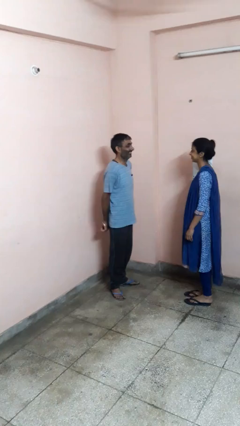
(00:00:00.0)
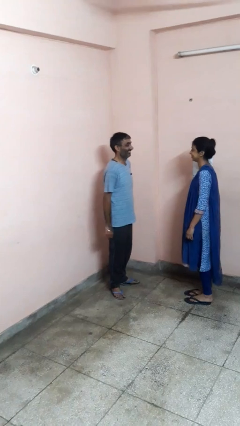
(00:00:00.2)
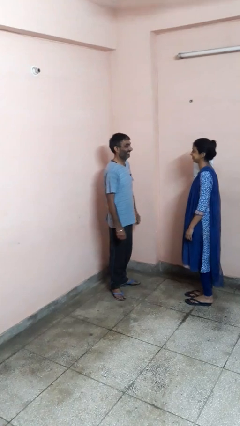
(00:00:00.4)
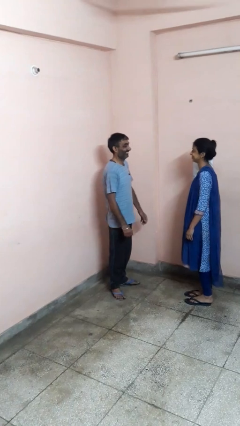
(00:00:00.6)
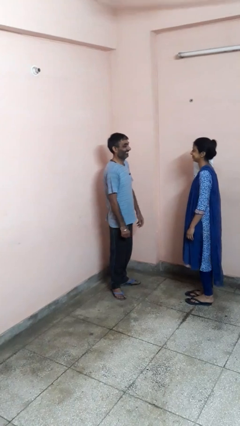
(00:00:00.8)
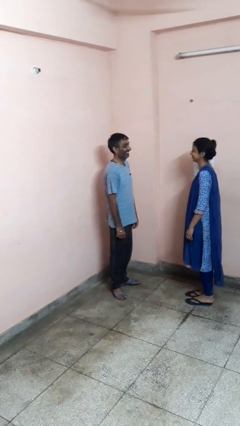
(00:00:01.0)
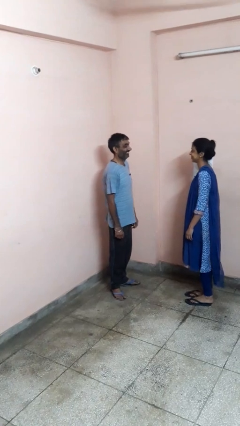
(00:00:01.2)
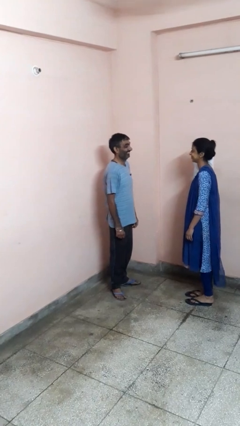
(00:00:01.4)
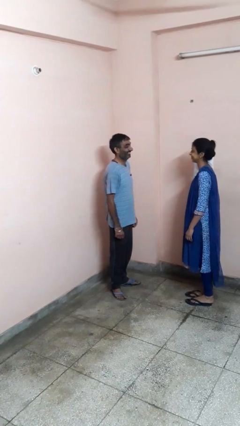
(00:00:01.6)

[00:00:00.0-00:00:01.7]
person laughs with person

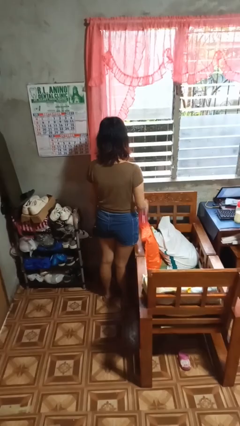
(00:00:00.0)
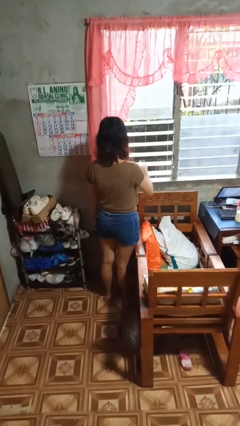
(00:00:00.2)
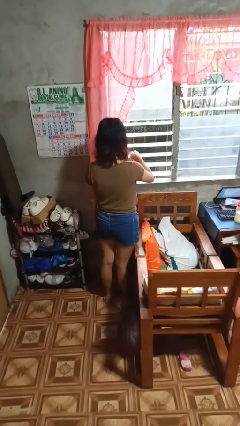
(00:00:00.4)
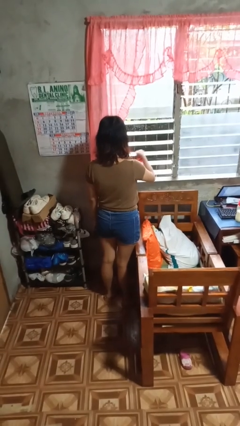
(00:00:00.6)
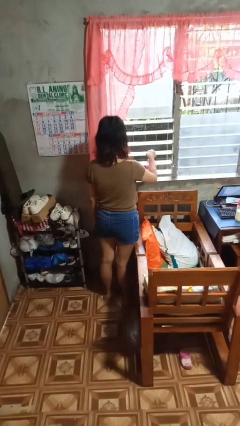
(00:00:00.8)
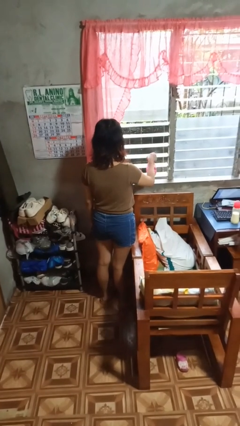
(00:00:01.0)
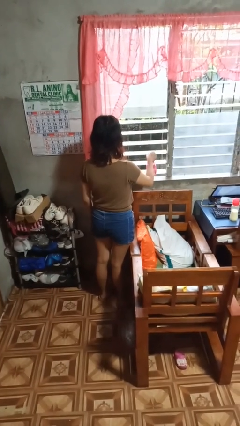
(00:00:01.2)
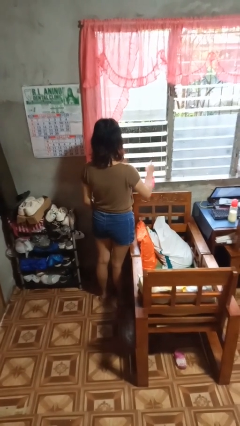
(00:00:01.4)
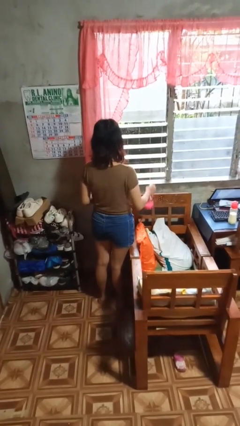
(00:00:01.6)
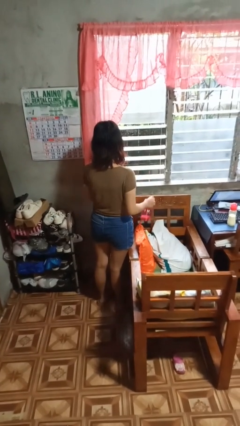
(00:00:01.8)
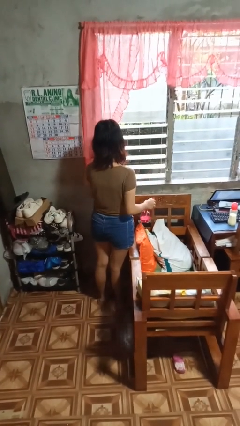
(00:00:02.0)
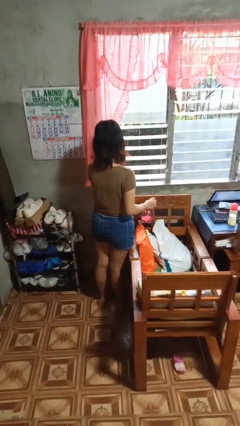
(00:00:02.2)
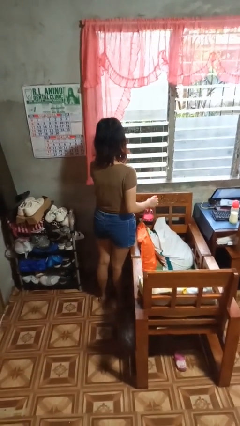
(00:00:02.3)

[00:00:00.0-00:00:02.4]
person sprays from bottle

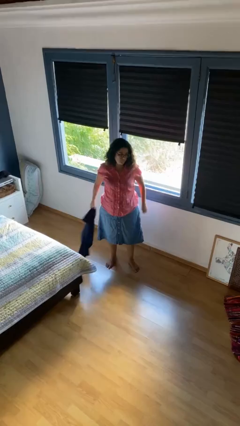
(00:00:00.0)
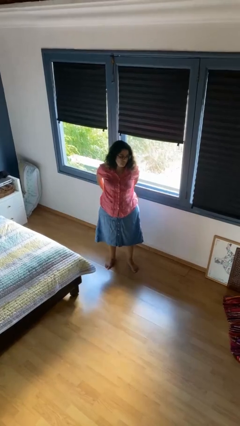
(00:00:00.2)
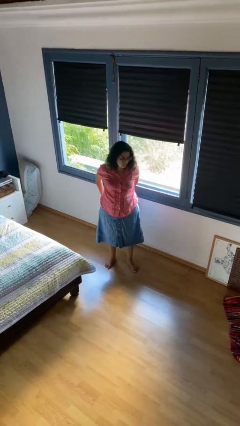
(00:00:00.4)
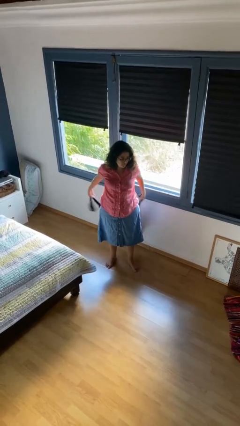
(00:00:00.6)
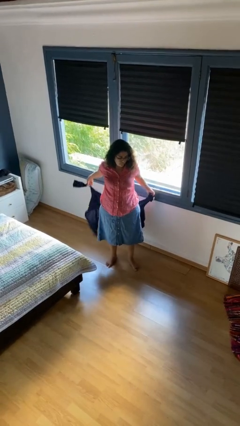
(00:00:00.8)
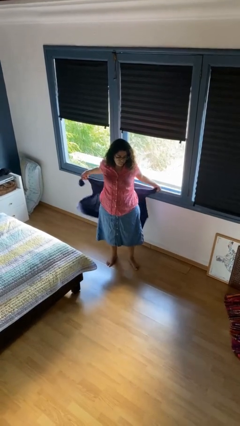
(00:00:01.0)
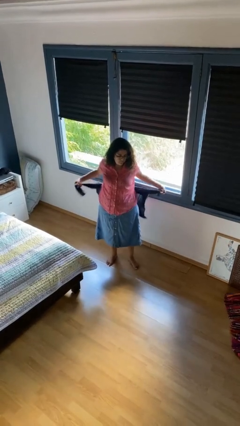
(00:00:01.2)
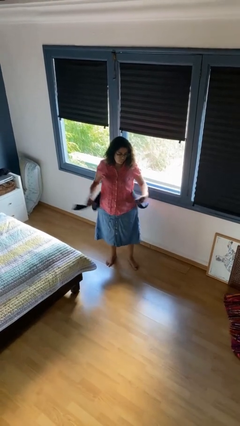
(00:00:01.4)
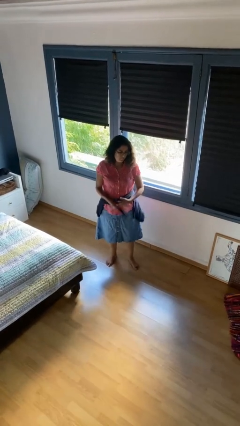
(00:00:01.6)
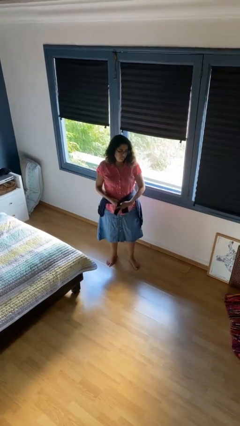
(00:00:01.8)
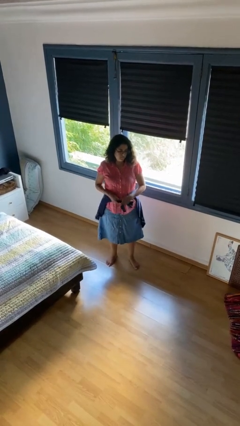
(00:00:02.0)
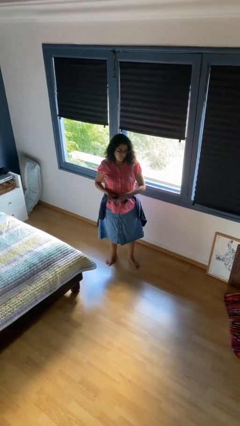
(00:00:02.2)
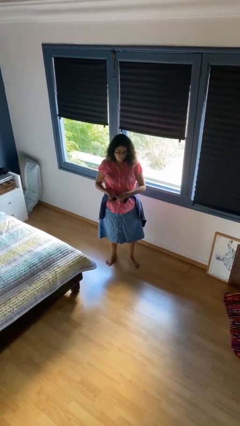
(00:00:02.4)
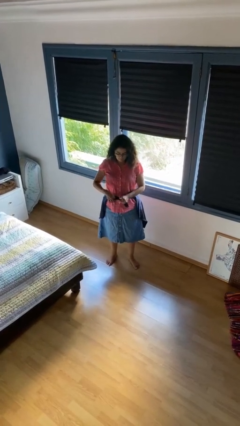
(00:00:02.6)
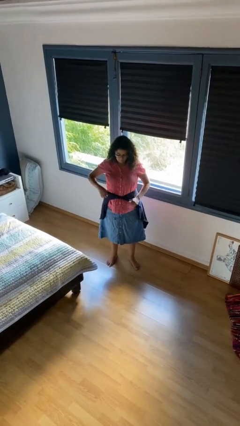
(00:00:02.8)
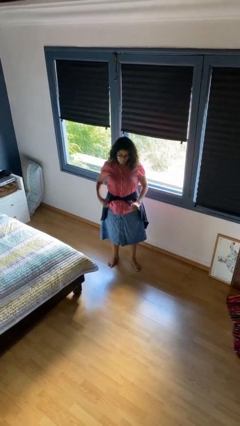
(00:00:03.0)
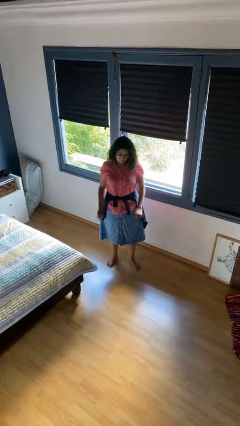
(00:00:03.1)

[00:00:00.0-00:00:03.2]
person ties jacket around waist

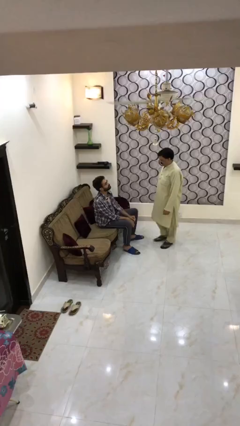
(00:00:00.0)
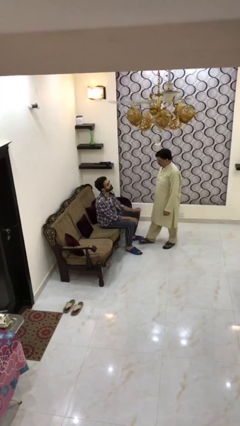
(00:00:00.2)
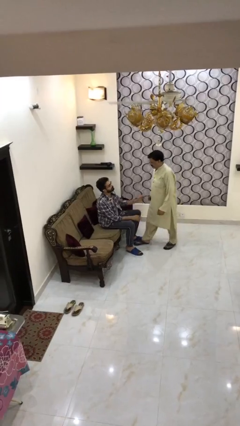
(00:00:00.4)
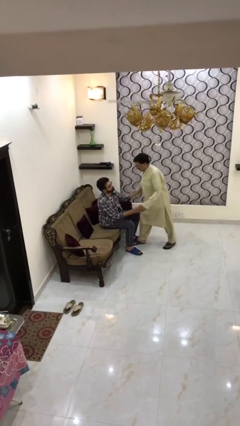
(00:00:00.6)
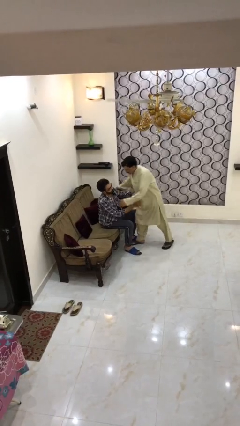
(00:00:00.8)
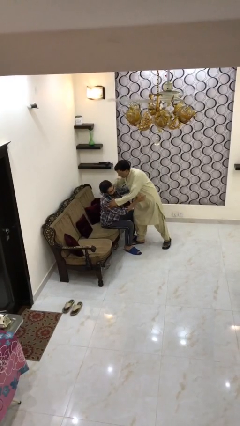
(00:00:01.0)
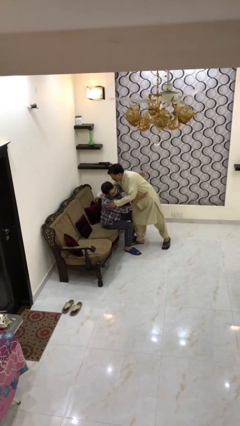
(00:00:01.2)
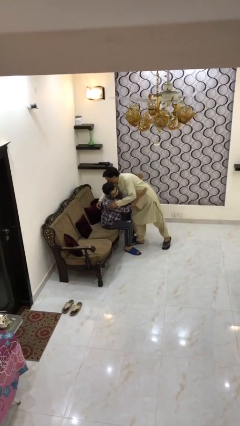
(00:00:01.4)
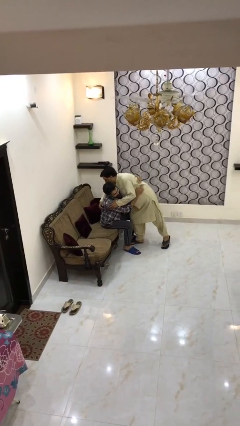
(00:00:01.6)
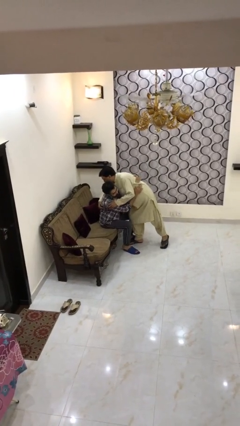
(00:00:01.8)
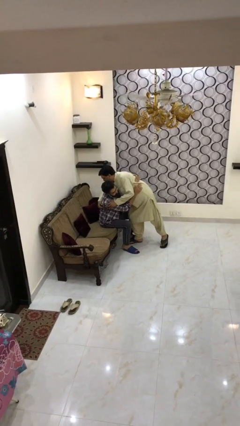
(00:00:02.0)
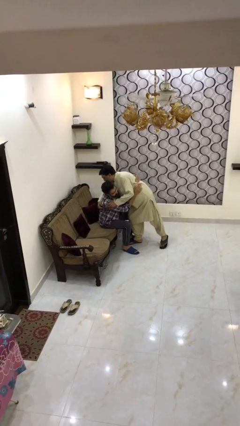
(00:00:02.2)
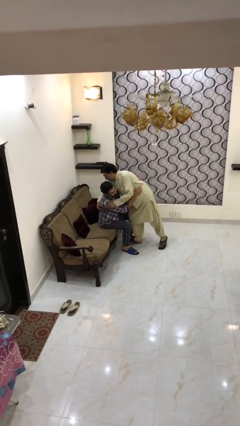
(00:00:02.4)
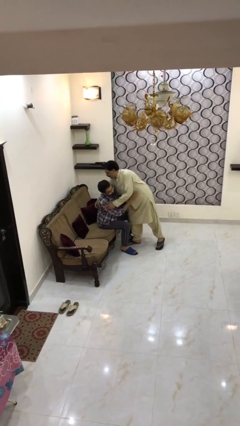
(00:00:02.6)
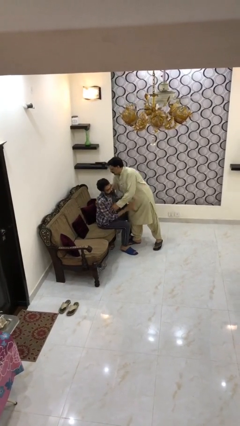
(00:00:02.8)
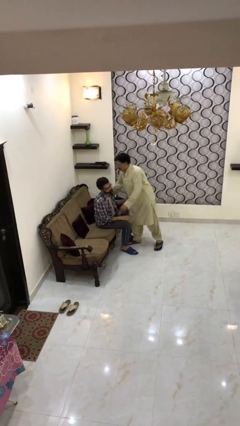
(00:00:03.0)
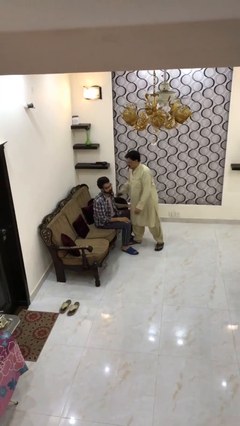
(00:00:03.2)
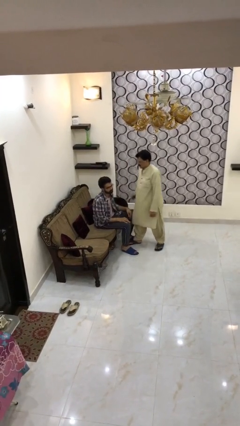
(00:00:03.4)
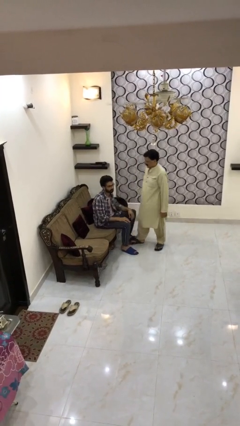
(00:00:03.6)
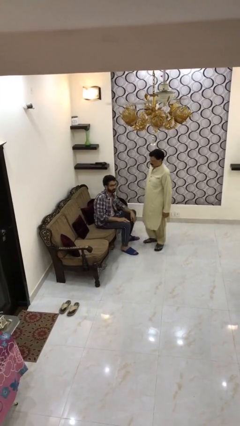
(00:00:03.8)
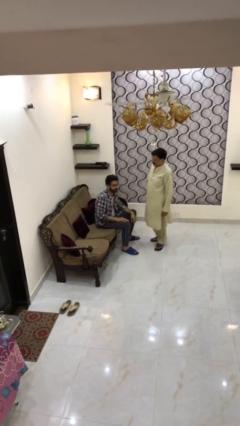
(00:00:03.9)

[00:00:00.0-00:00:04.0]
person embraces person

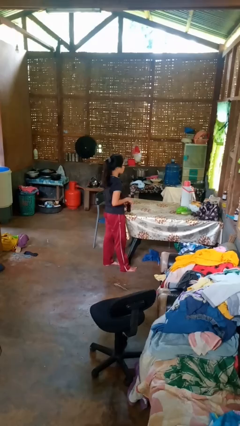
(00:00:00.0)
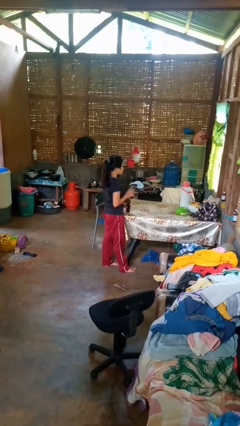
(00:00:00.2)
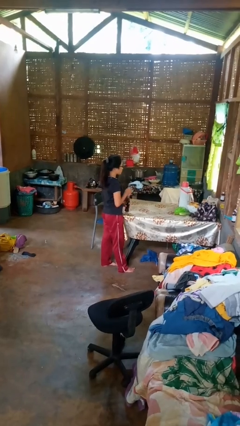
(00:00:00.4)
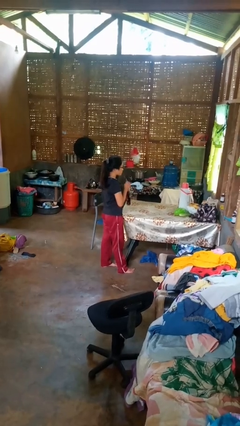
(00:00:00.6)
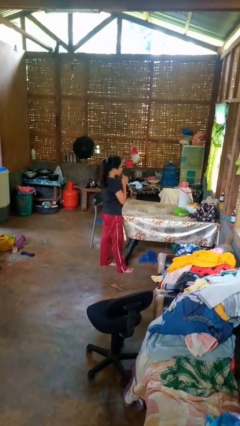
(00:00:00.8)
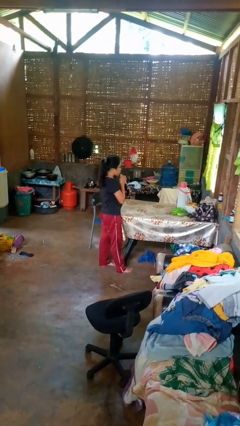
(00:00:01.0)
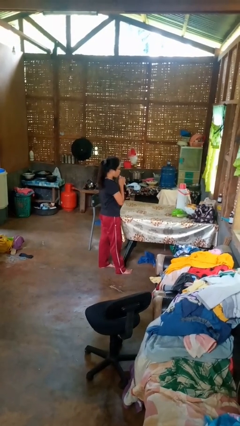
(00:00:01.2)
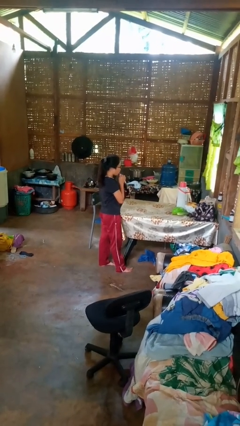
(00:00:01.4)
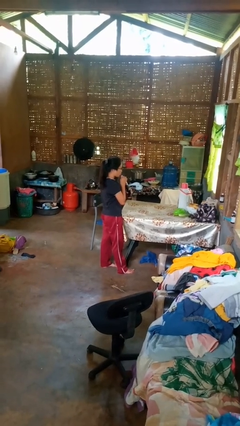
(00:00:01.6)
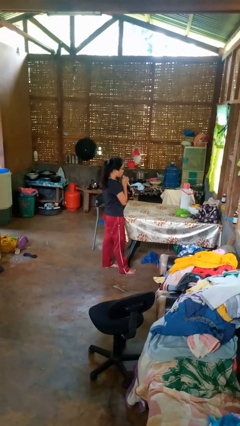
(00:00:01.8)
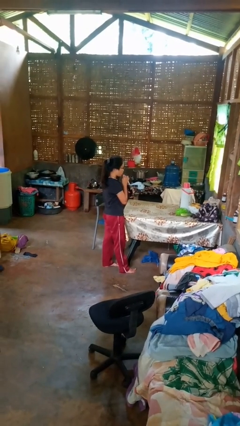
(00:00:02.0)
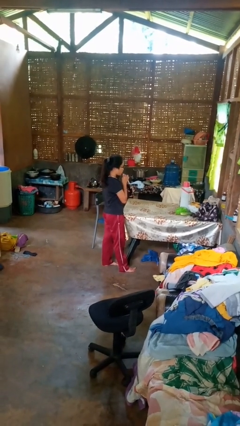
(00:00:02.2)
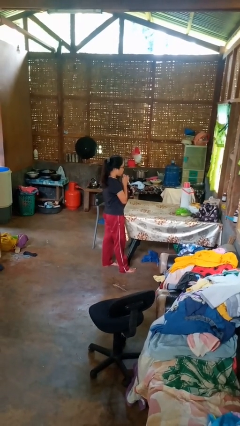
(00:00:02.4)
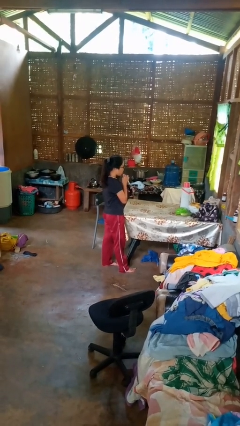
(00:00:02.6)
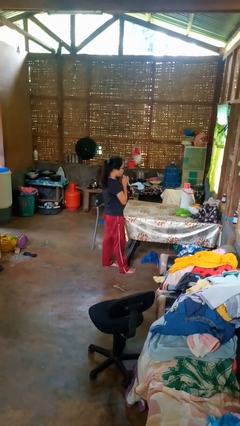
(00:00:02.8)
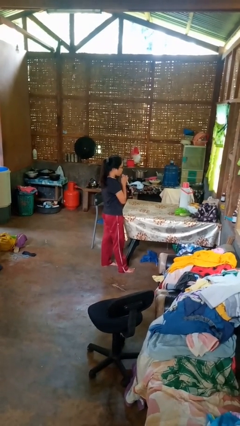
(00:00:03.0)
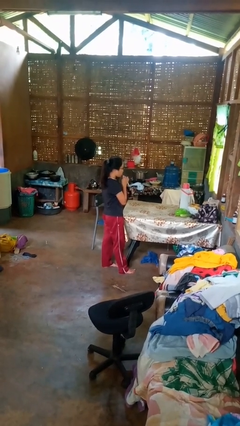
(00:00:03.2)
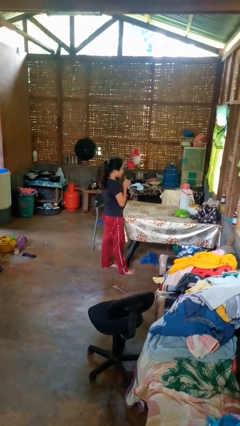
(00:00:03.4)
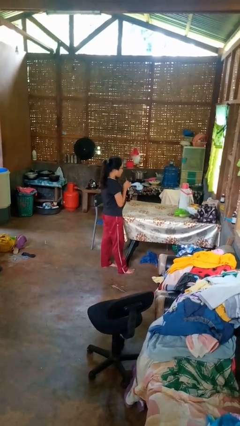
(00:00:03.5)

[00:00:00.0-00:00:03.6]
person drinks from straw

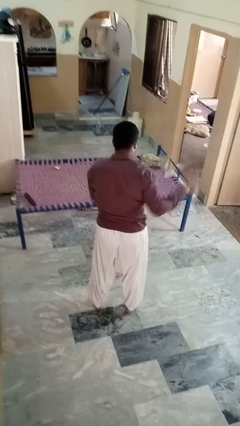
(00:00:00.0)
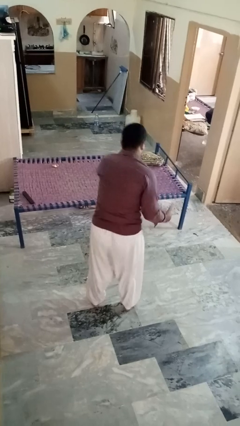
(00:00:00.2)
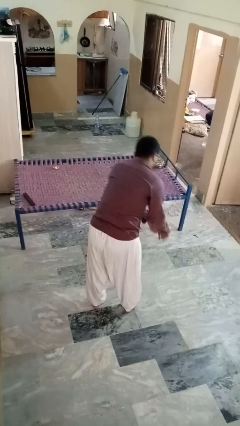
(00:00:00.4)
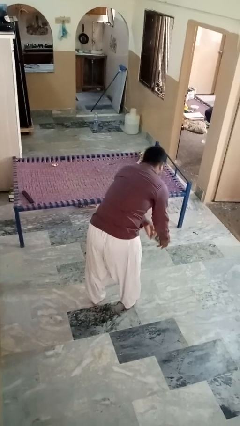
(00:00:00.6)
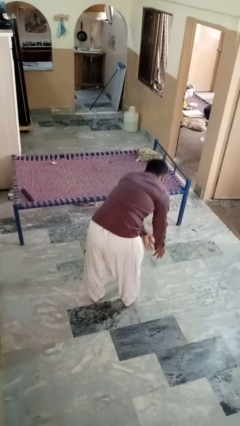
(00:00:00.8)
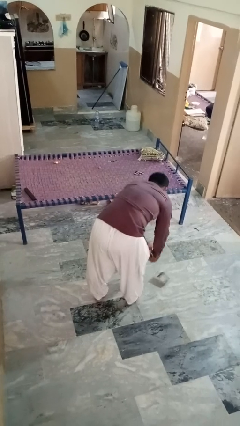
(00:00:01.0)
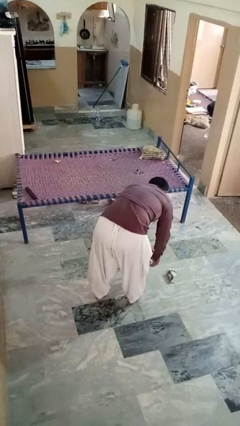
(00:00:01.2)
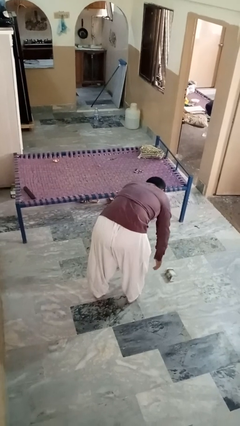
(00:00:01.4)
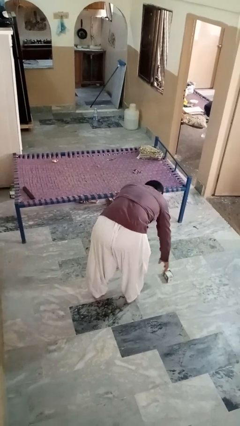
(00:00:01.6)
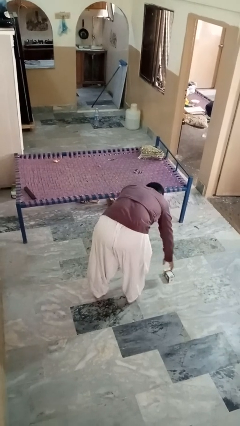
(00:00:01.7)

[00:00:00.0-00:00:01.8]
person catches dropped object

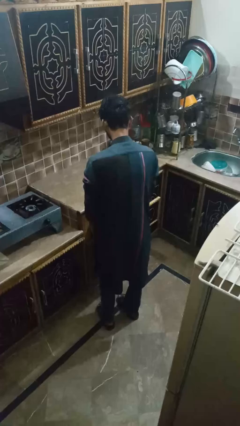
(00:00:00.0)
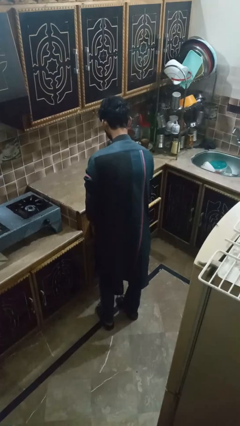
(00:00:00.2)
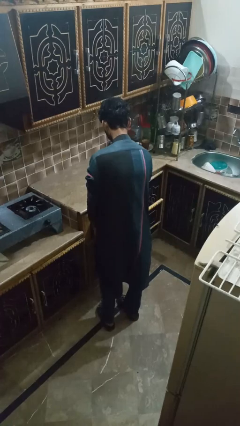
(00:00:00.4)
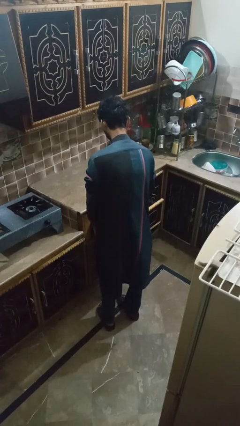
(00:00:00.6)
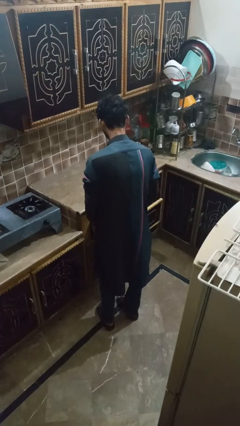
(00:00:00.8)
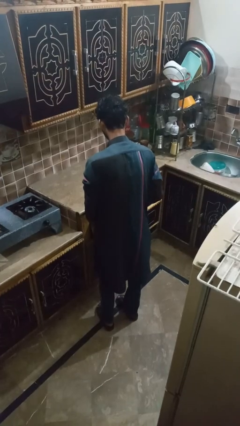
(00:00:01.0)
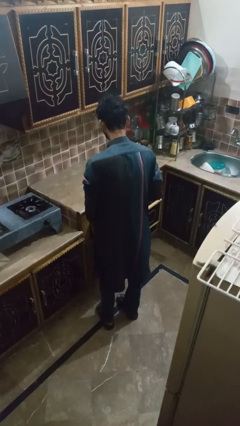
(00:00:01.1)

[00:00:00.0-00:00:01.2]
person takes object from kitchen drawer
